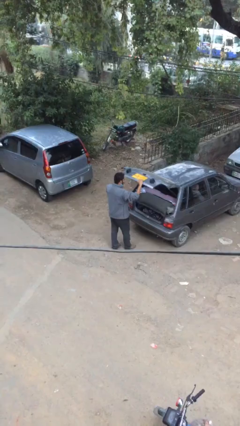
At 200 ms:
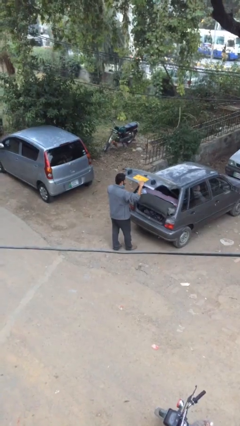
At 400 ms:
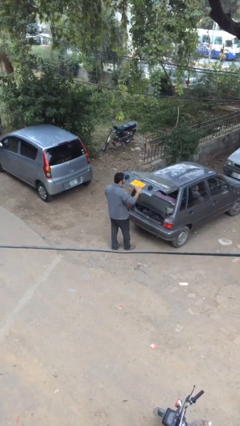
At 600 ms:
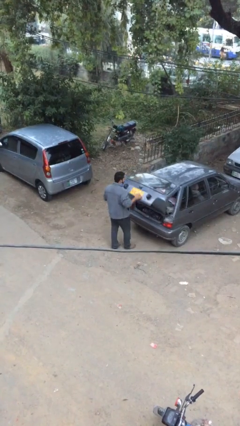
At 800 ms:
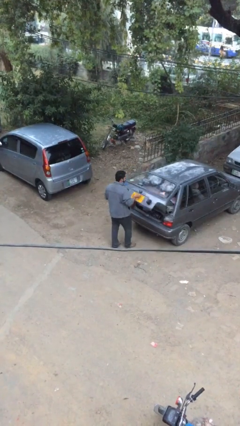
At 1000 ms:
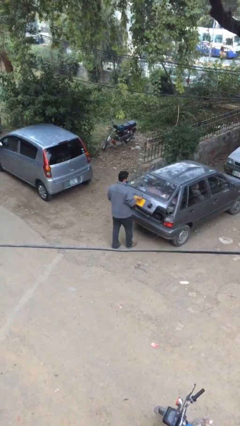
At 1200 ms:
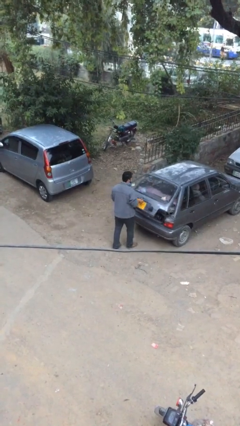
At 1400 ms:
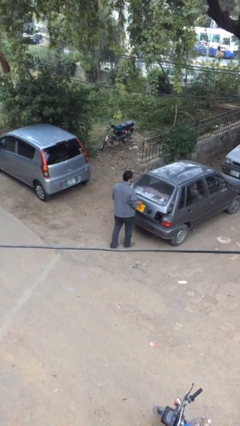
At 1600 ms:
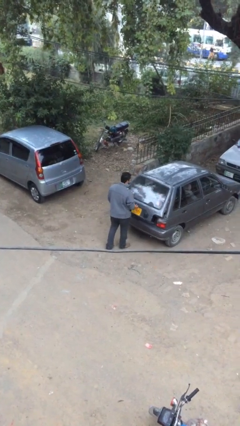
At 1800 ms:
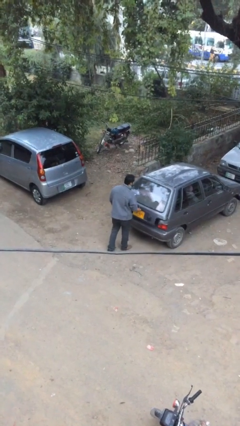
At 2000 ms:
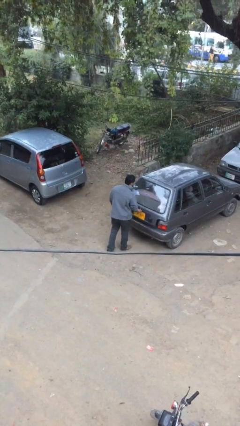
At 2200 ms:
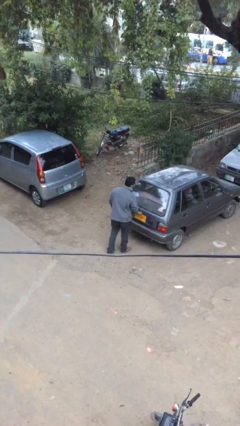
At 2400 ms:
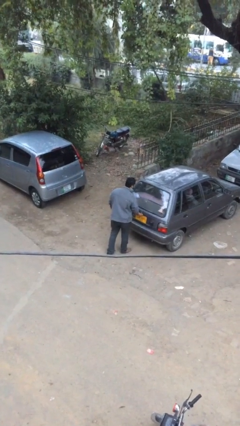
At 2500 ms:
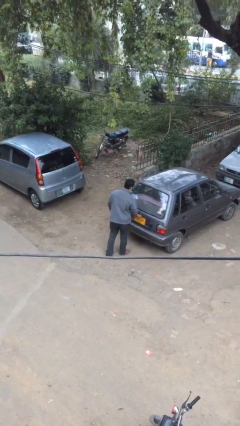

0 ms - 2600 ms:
person closes car trunk

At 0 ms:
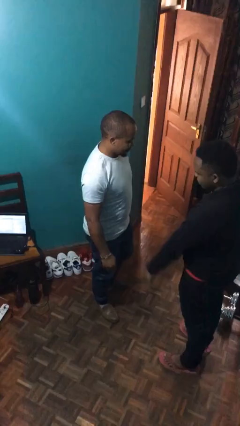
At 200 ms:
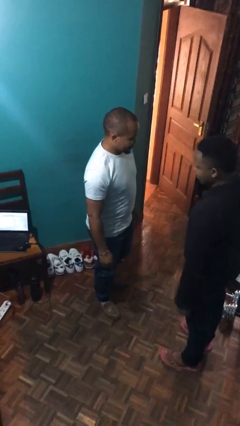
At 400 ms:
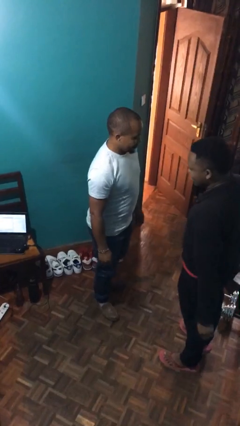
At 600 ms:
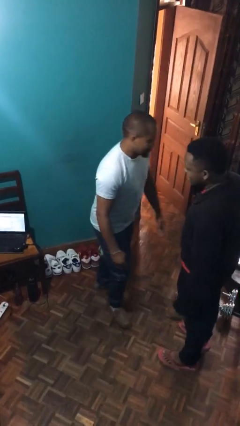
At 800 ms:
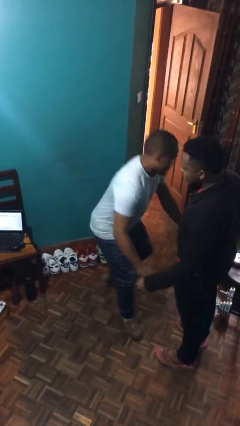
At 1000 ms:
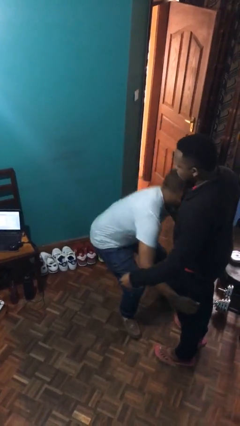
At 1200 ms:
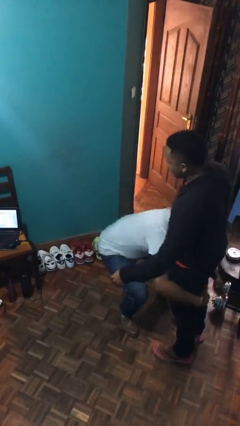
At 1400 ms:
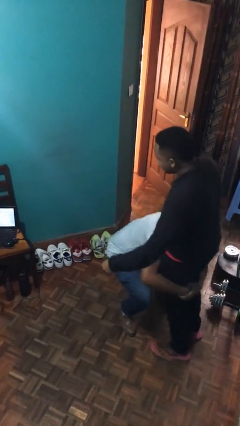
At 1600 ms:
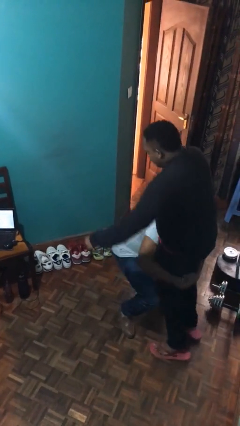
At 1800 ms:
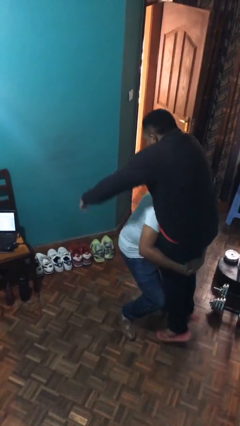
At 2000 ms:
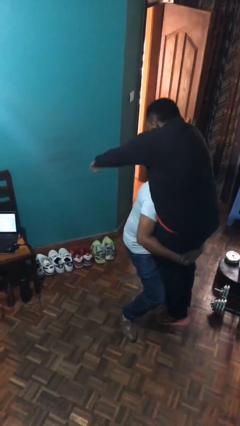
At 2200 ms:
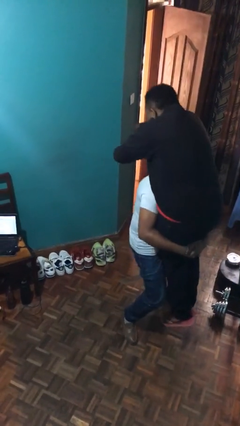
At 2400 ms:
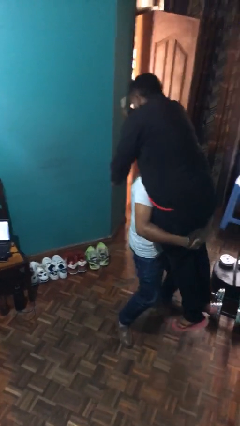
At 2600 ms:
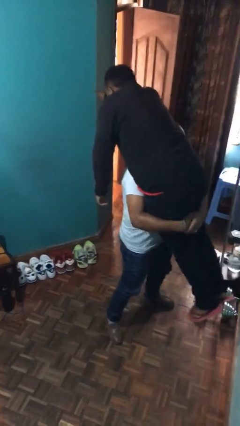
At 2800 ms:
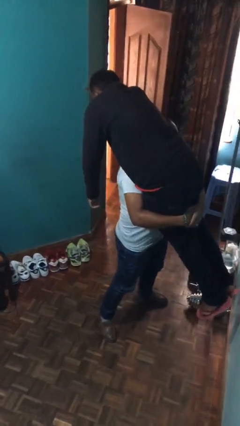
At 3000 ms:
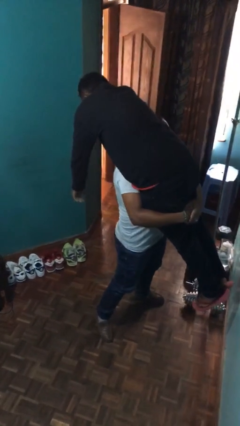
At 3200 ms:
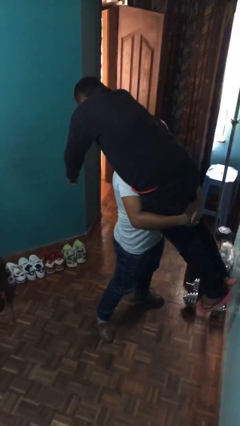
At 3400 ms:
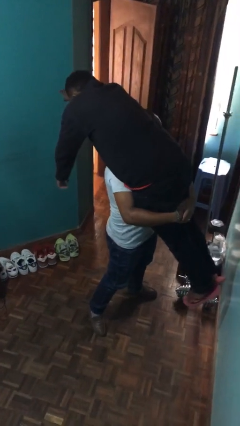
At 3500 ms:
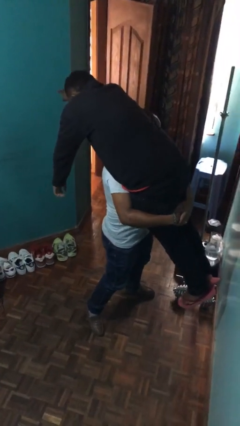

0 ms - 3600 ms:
person carries person over shoulder

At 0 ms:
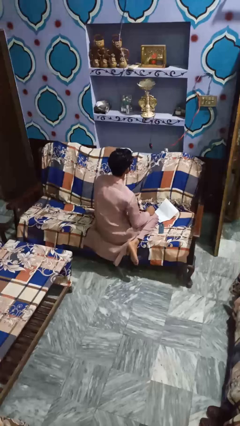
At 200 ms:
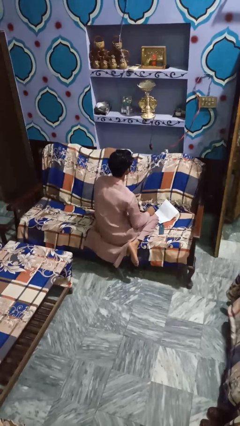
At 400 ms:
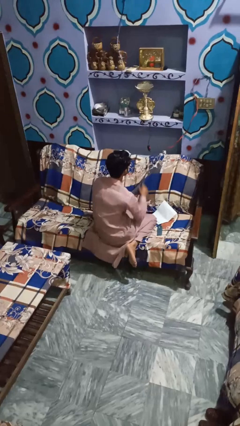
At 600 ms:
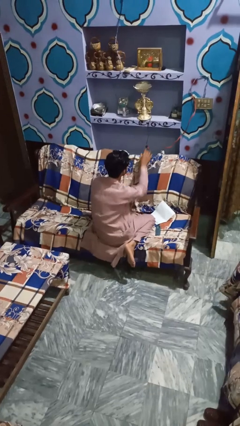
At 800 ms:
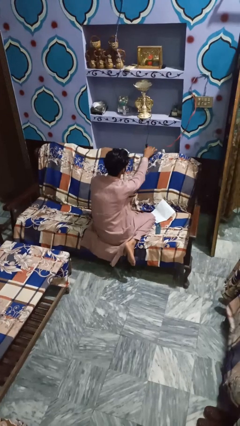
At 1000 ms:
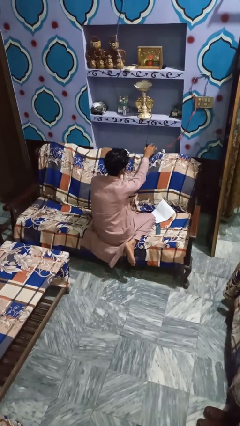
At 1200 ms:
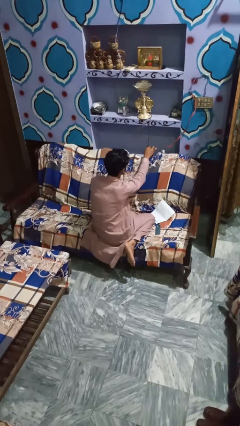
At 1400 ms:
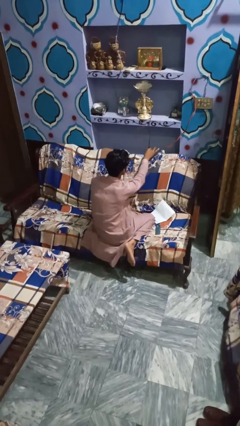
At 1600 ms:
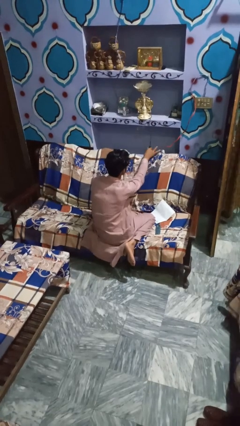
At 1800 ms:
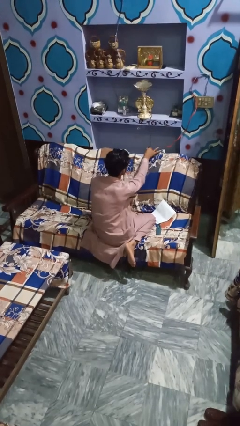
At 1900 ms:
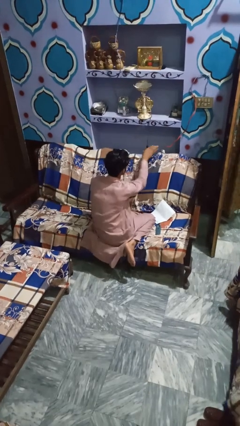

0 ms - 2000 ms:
person turns on lamp

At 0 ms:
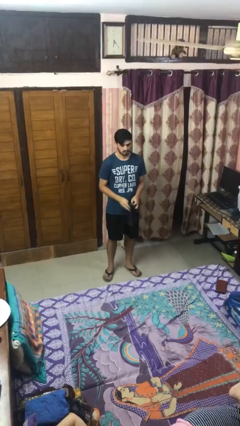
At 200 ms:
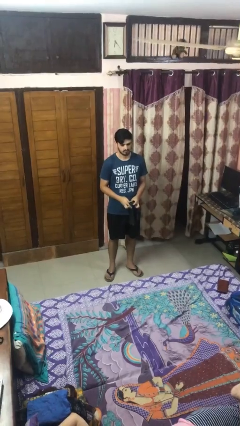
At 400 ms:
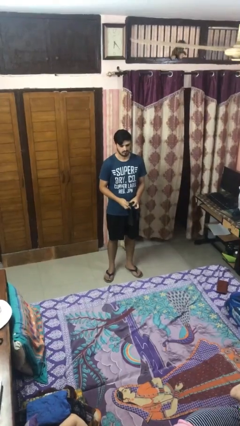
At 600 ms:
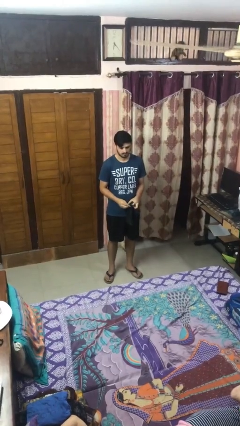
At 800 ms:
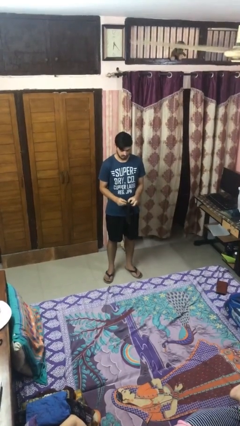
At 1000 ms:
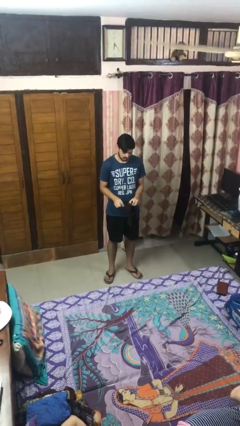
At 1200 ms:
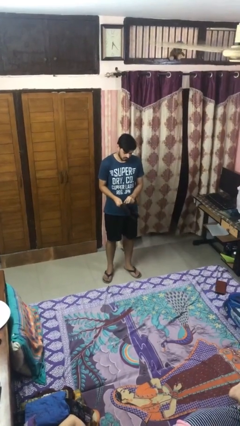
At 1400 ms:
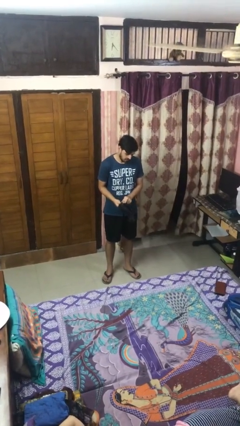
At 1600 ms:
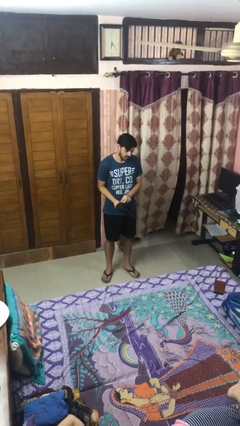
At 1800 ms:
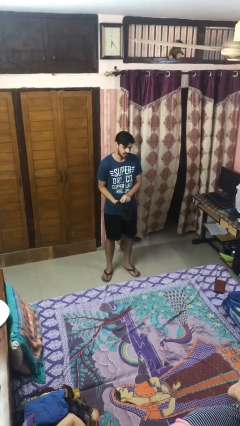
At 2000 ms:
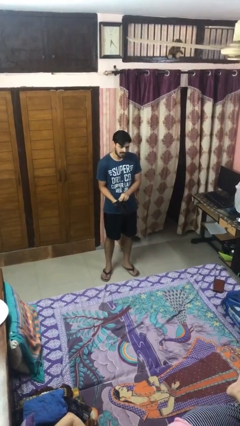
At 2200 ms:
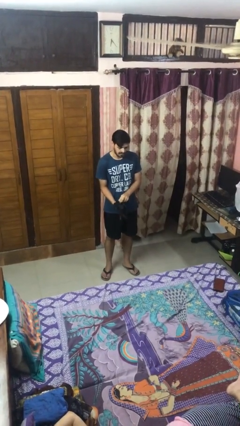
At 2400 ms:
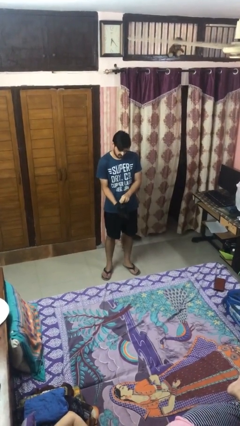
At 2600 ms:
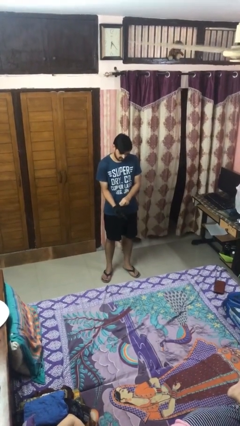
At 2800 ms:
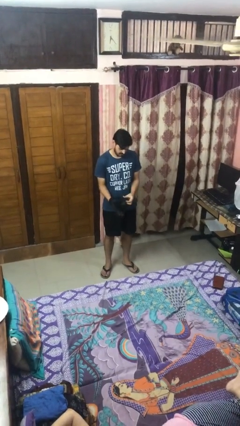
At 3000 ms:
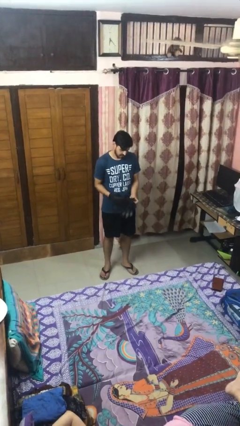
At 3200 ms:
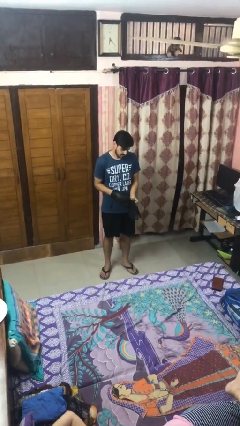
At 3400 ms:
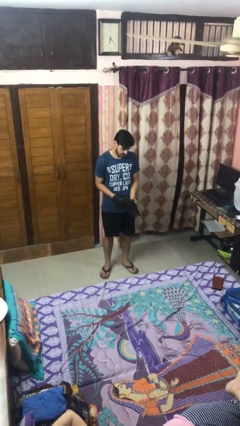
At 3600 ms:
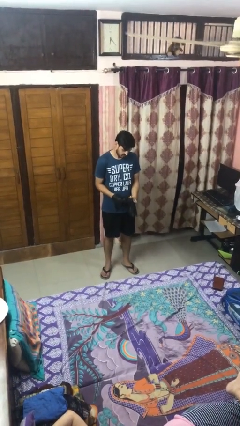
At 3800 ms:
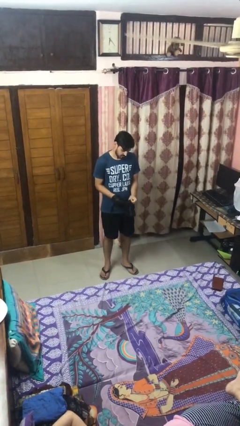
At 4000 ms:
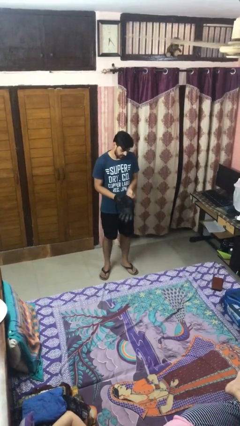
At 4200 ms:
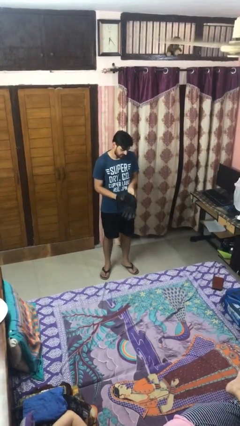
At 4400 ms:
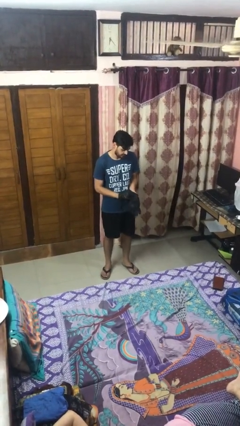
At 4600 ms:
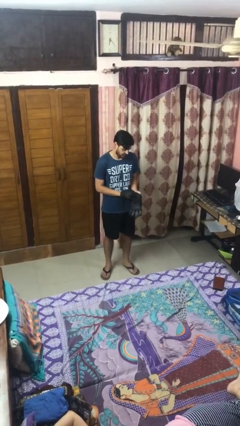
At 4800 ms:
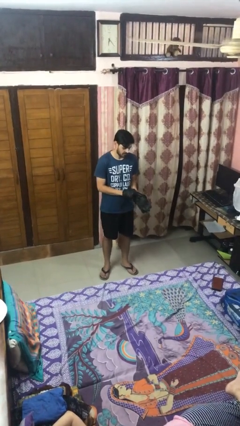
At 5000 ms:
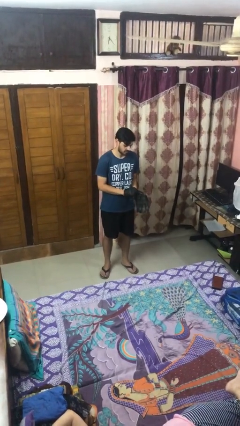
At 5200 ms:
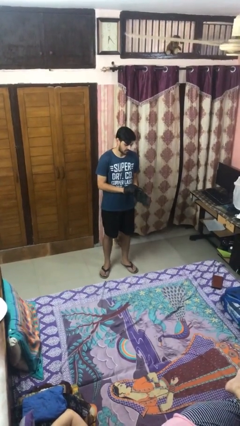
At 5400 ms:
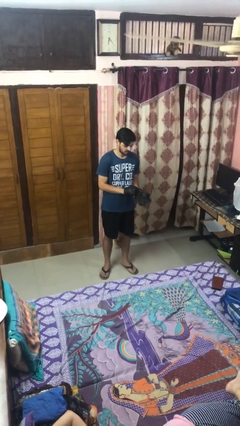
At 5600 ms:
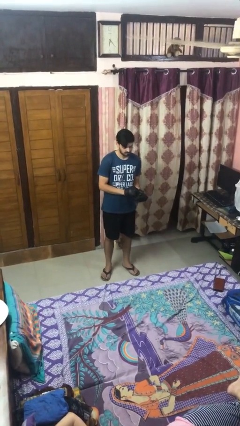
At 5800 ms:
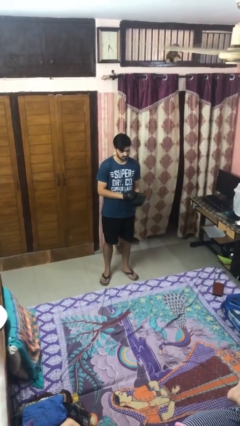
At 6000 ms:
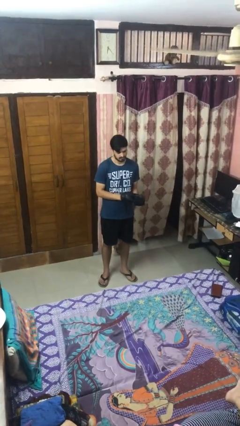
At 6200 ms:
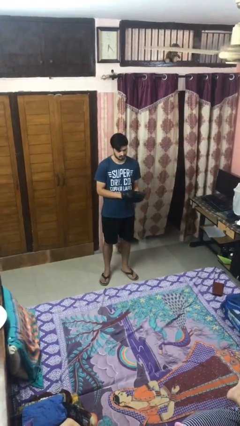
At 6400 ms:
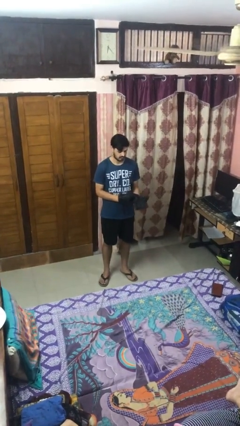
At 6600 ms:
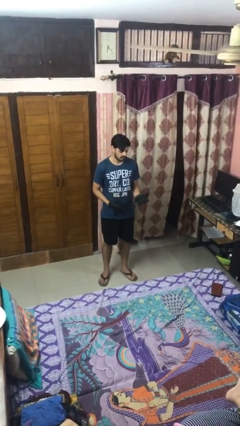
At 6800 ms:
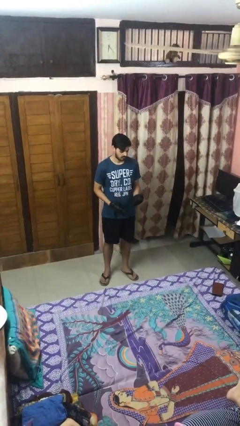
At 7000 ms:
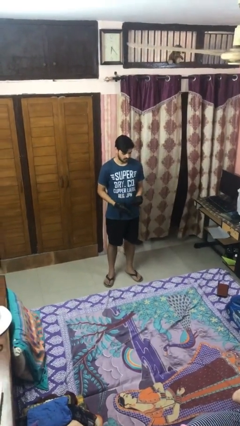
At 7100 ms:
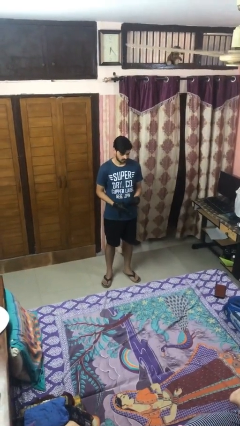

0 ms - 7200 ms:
person puts on gloves

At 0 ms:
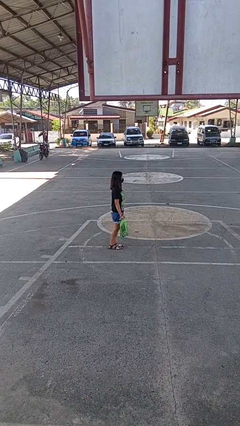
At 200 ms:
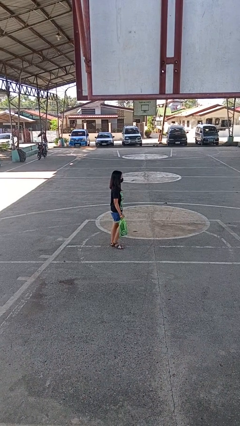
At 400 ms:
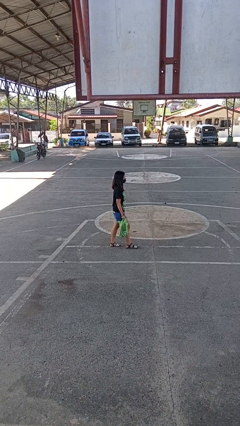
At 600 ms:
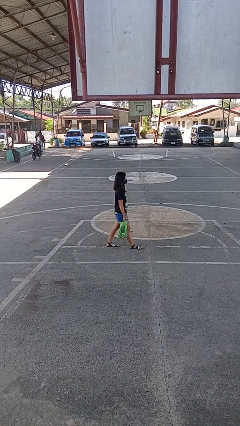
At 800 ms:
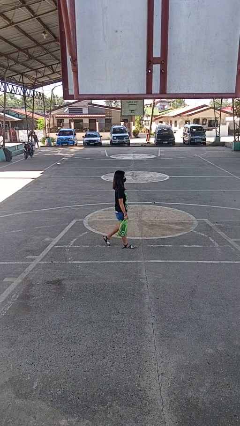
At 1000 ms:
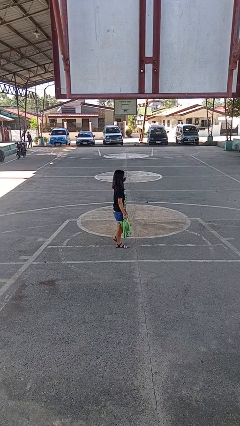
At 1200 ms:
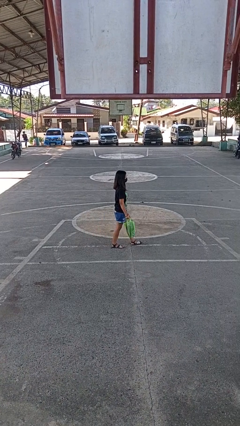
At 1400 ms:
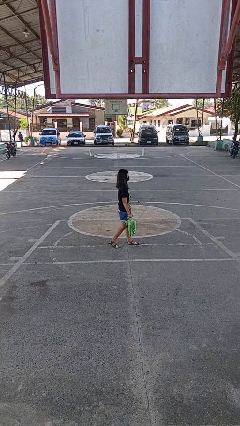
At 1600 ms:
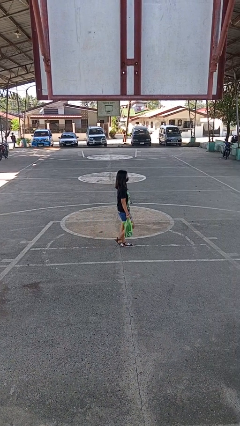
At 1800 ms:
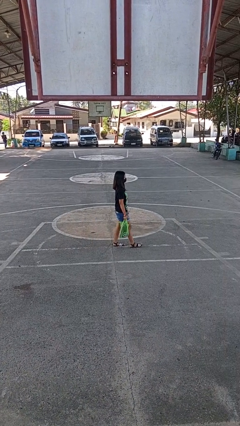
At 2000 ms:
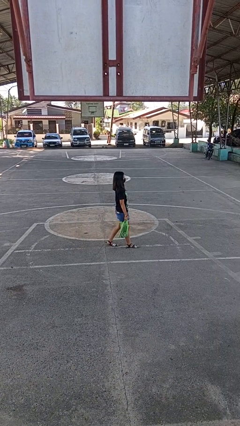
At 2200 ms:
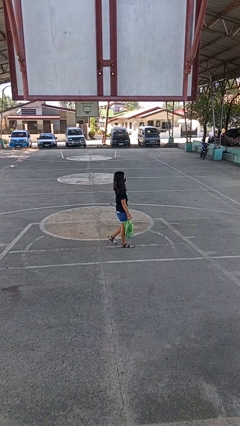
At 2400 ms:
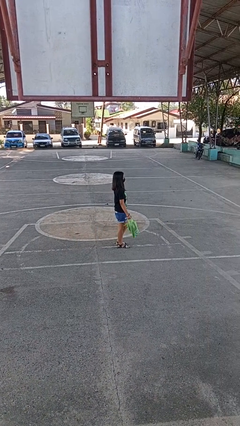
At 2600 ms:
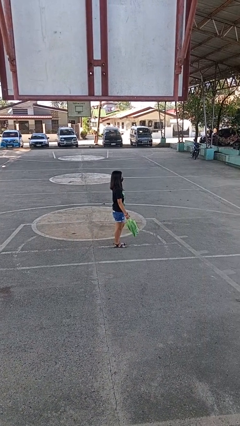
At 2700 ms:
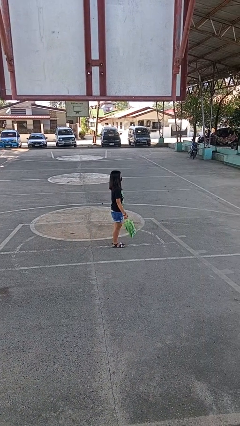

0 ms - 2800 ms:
person carries groceries
